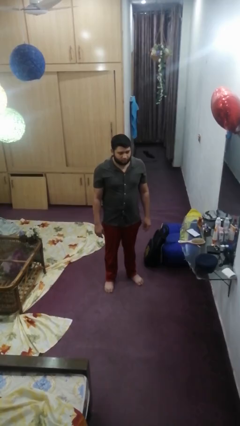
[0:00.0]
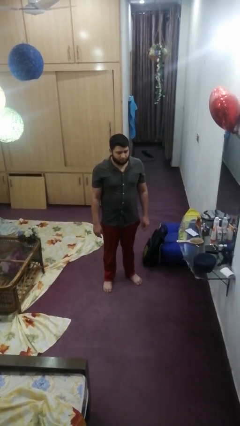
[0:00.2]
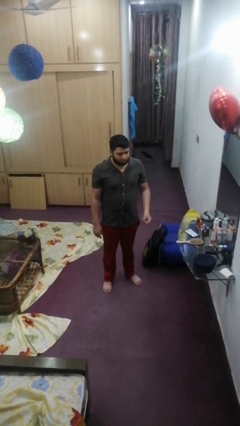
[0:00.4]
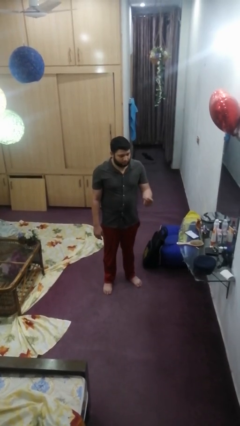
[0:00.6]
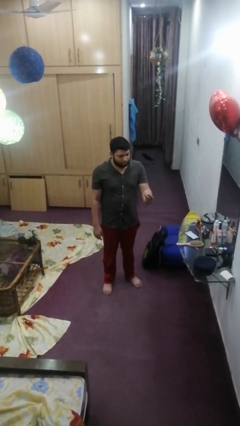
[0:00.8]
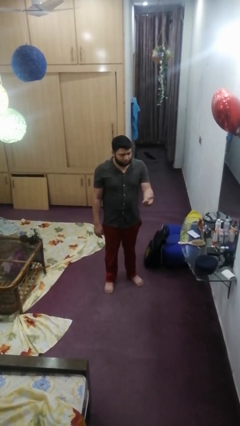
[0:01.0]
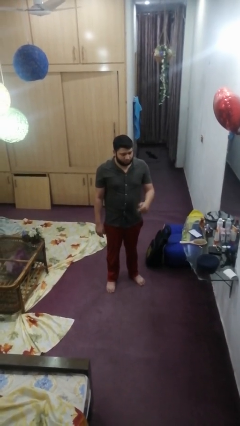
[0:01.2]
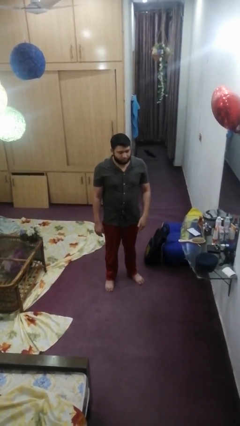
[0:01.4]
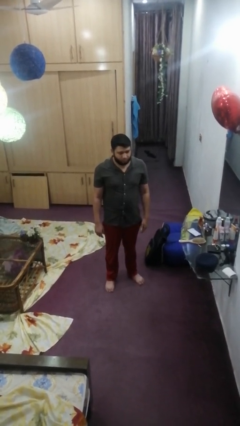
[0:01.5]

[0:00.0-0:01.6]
person snaps fingers

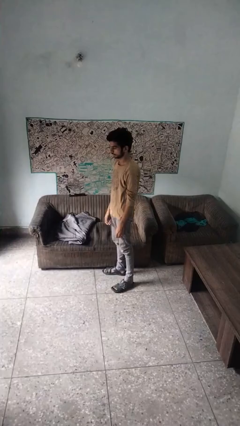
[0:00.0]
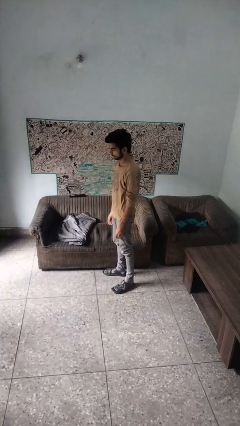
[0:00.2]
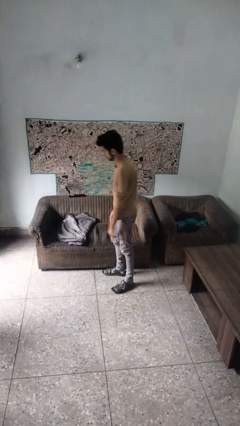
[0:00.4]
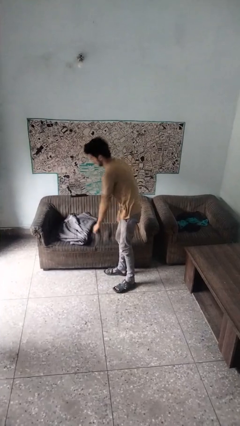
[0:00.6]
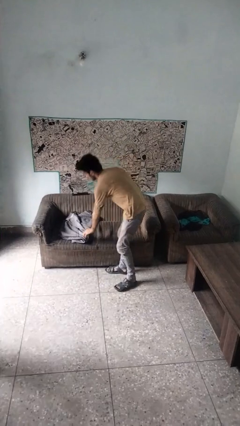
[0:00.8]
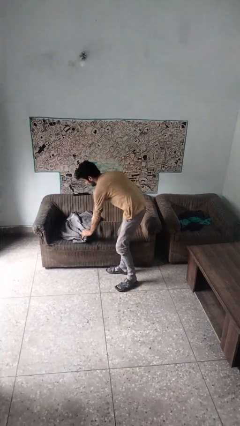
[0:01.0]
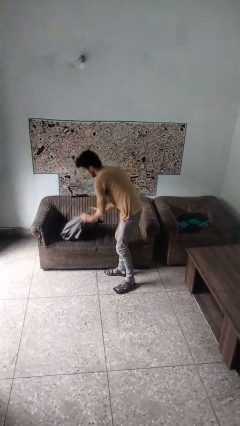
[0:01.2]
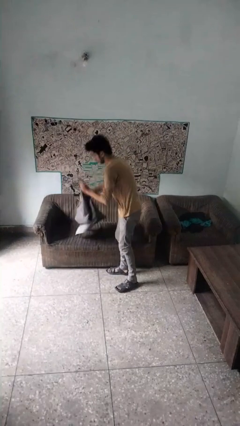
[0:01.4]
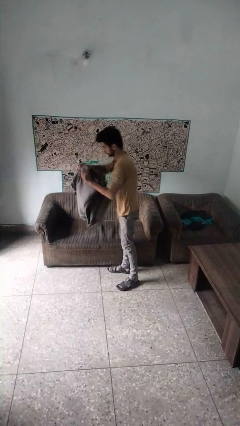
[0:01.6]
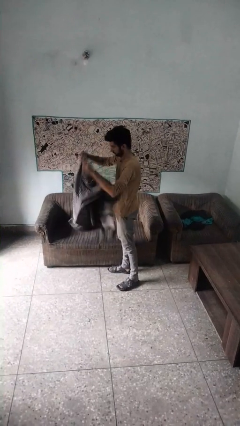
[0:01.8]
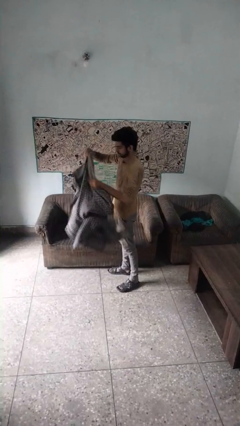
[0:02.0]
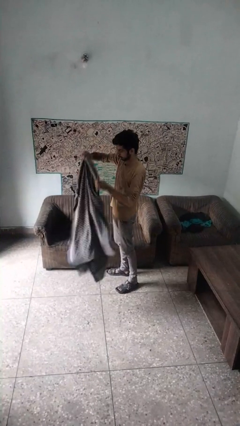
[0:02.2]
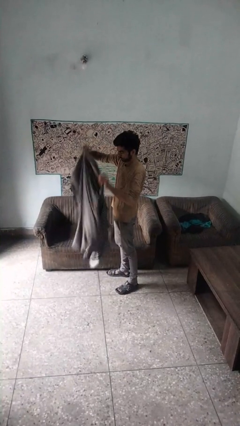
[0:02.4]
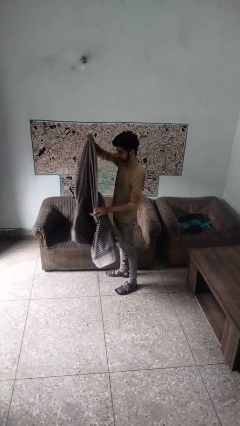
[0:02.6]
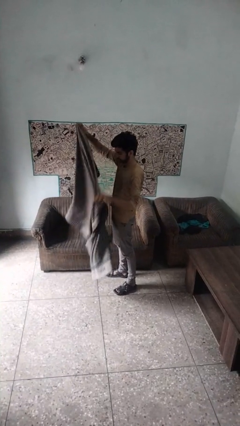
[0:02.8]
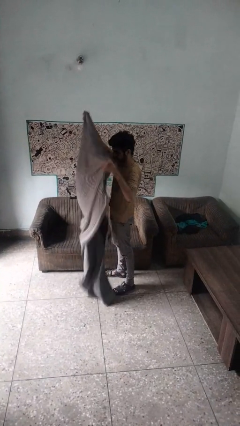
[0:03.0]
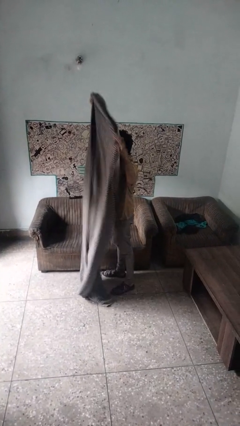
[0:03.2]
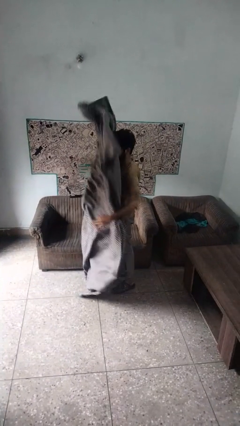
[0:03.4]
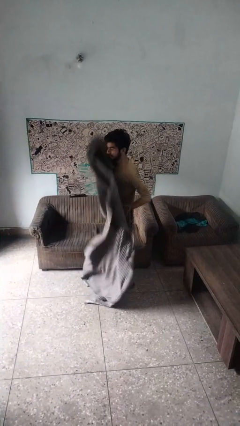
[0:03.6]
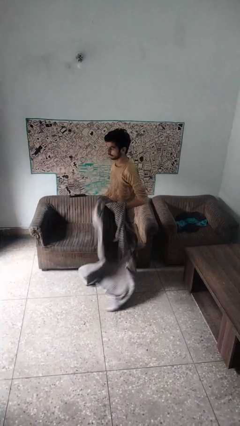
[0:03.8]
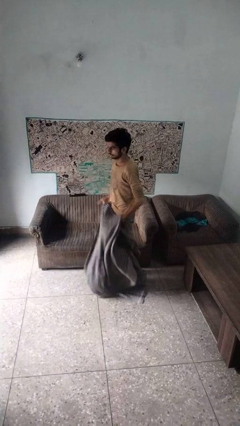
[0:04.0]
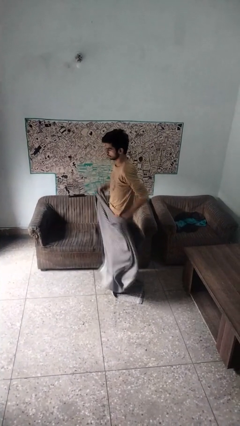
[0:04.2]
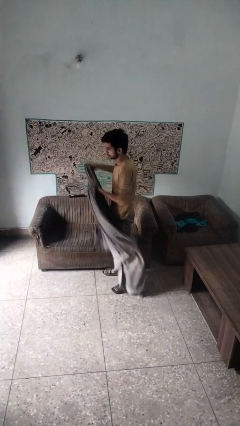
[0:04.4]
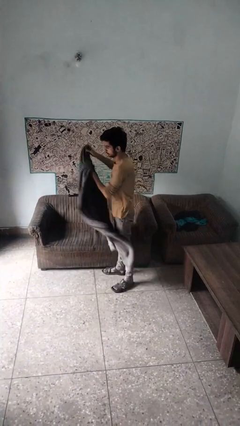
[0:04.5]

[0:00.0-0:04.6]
person unfolds blanket

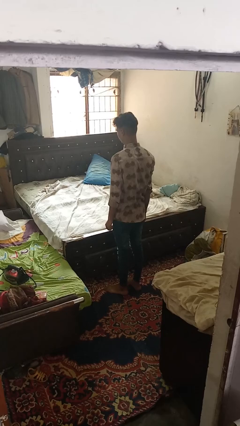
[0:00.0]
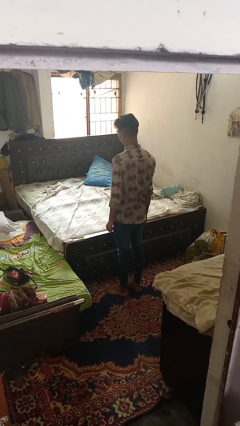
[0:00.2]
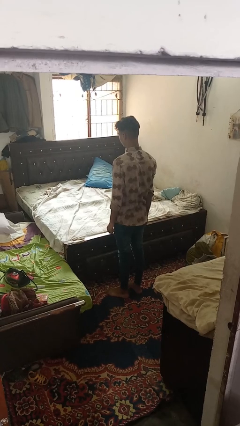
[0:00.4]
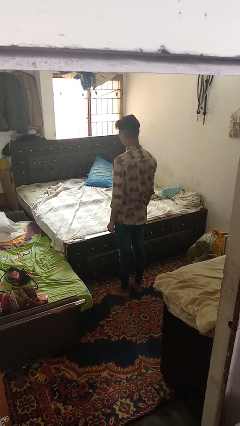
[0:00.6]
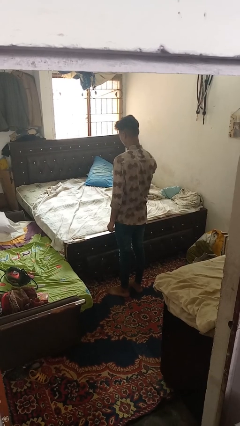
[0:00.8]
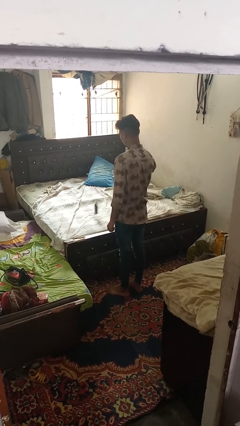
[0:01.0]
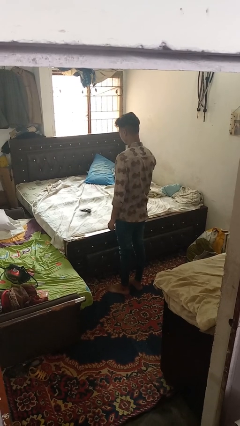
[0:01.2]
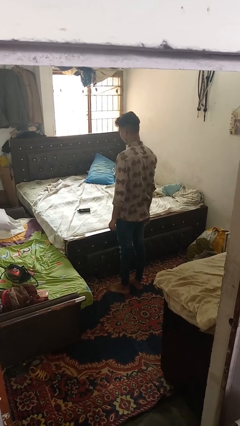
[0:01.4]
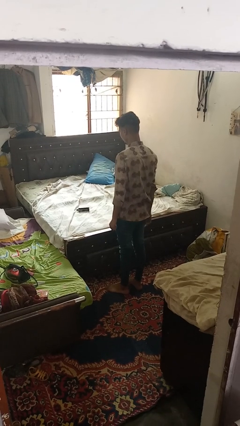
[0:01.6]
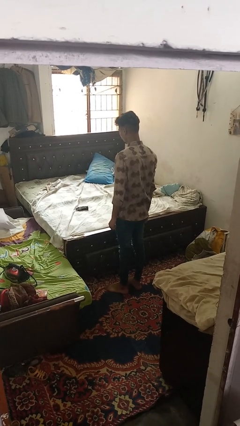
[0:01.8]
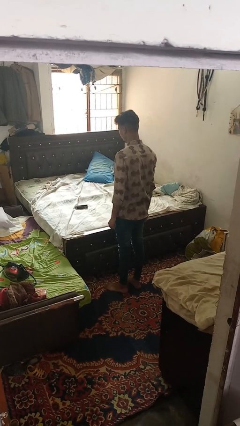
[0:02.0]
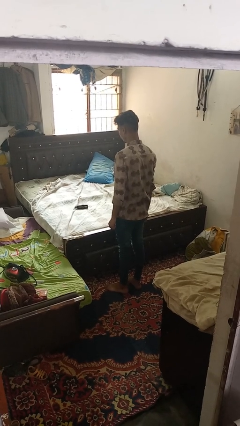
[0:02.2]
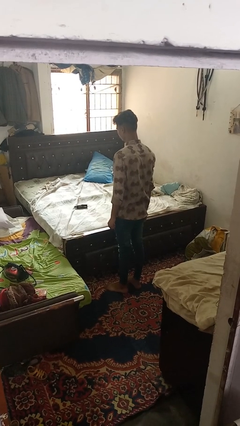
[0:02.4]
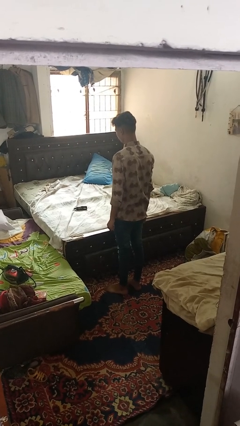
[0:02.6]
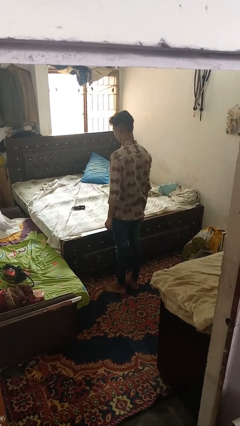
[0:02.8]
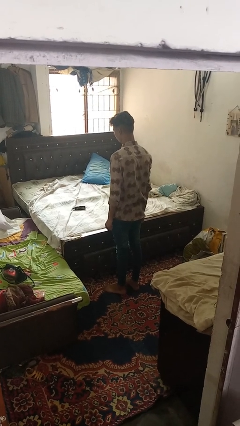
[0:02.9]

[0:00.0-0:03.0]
person throws object on bed

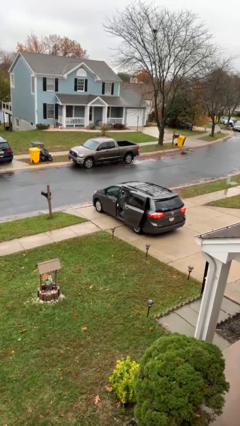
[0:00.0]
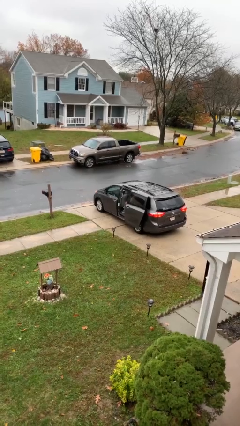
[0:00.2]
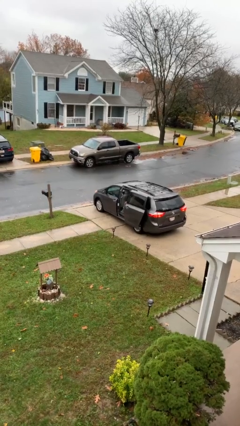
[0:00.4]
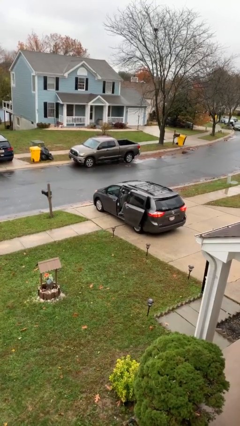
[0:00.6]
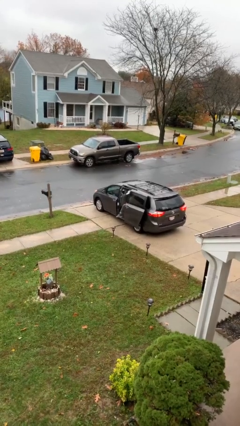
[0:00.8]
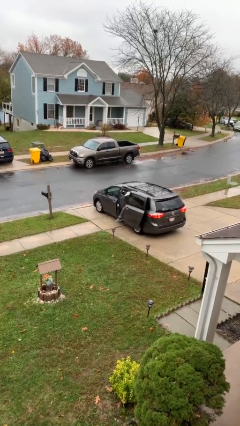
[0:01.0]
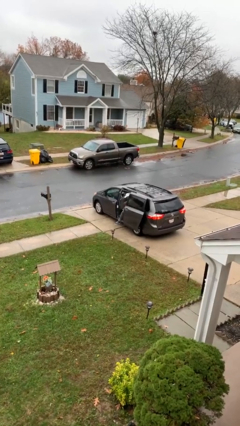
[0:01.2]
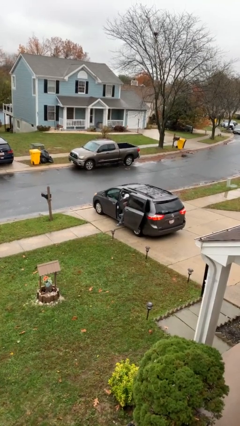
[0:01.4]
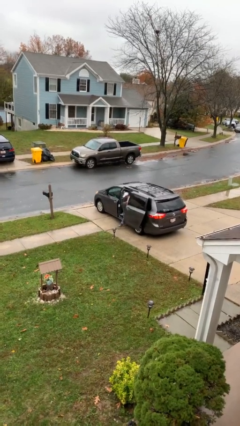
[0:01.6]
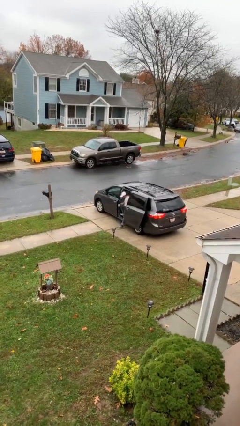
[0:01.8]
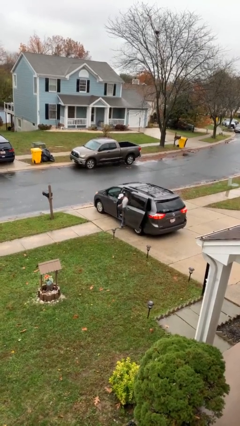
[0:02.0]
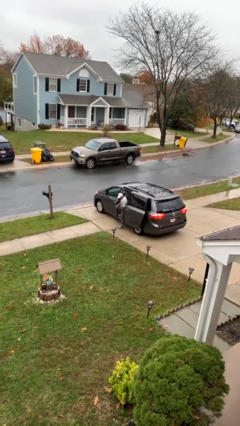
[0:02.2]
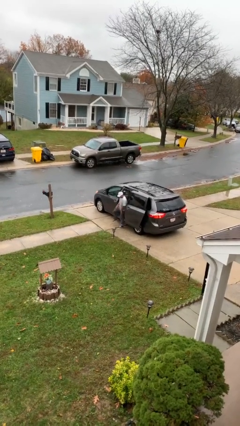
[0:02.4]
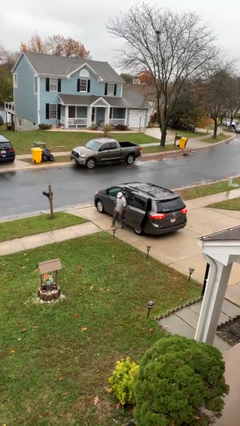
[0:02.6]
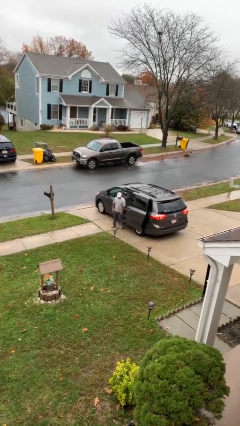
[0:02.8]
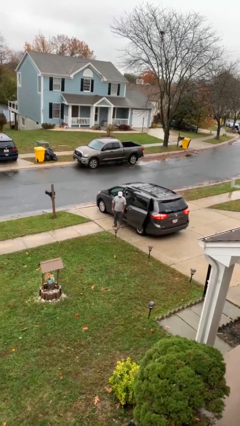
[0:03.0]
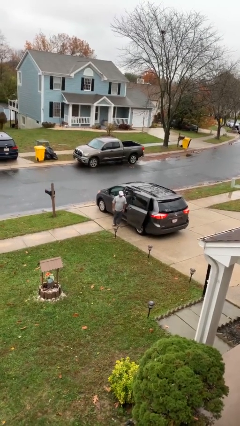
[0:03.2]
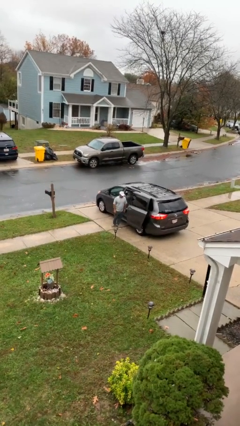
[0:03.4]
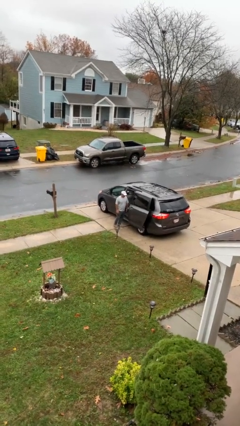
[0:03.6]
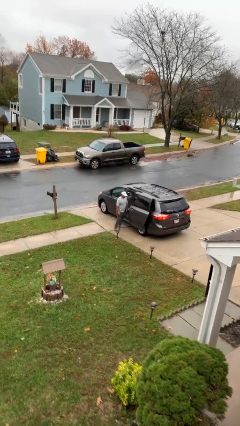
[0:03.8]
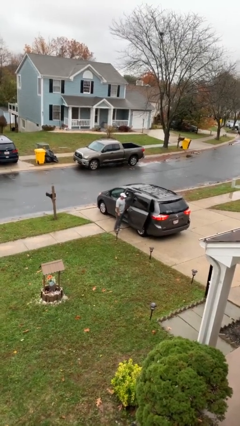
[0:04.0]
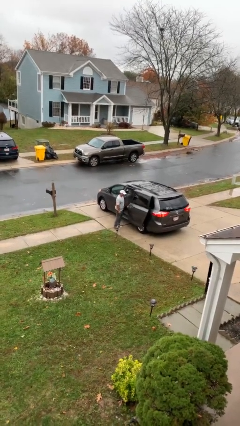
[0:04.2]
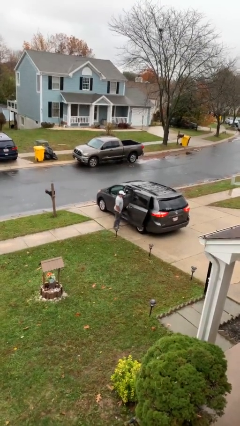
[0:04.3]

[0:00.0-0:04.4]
person exits car

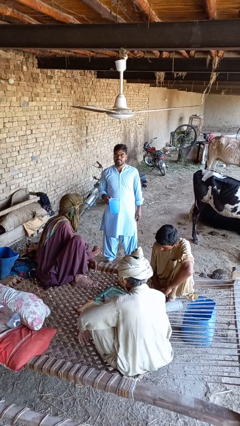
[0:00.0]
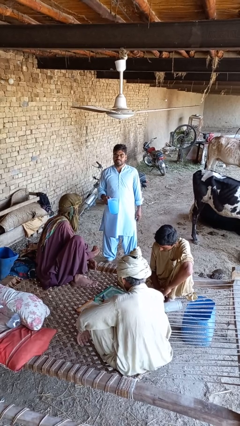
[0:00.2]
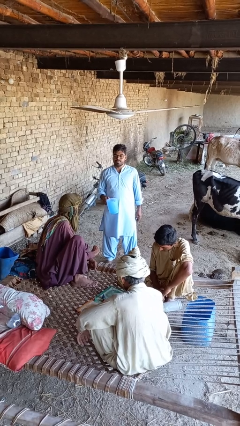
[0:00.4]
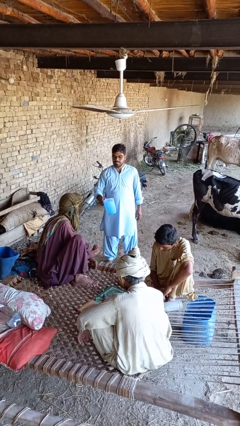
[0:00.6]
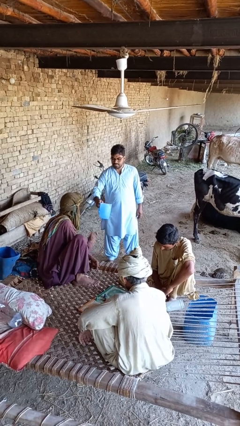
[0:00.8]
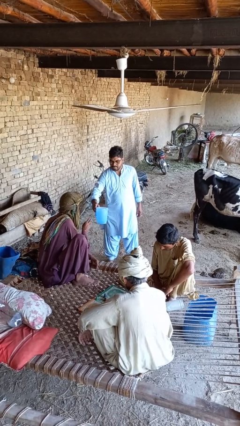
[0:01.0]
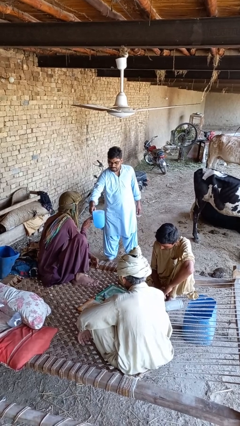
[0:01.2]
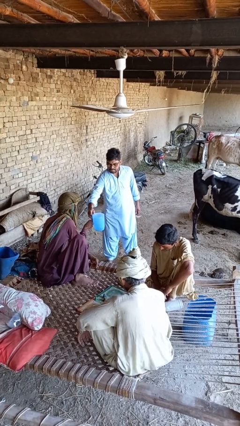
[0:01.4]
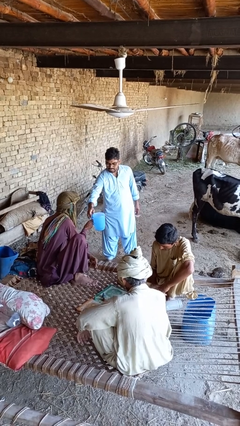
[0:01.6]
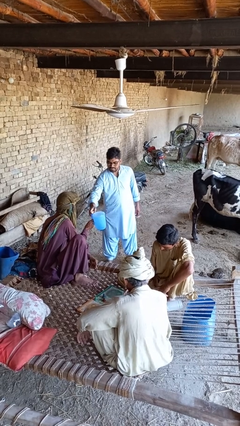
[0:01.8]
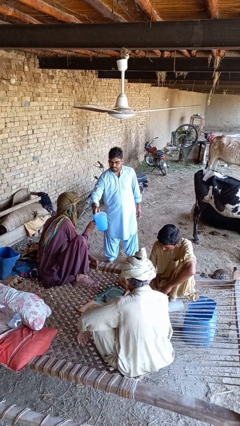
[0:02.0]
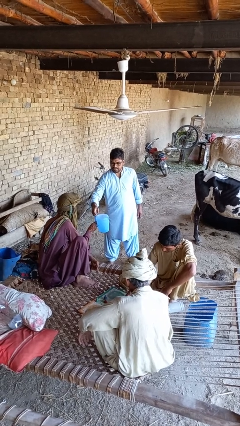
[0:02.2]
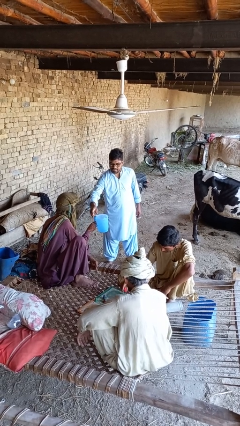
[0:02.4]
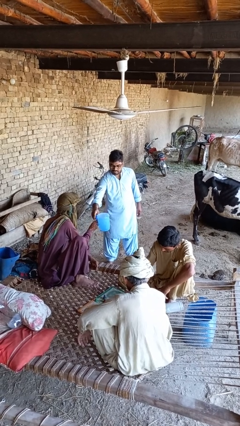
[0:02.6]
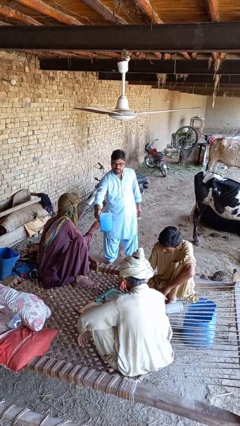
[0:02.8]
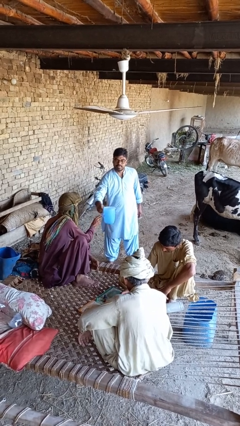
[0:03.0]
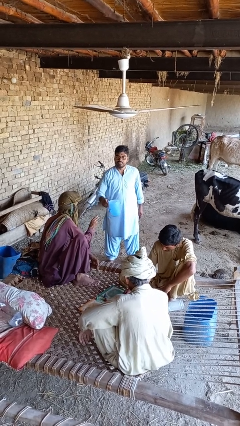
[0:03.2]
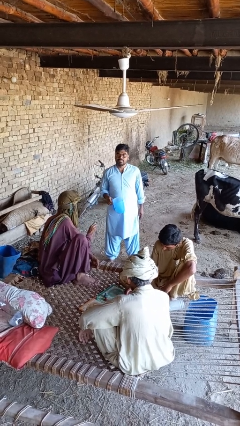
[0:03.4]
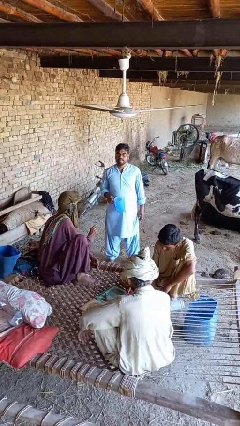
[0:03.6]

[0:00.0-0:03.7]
person transfers object to person
